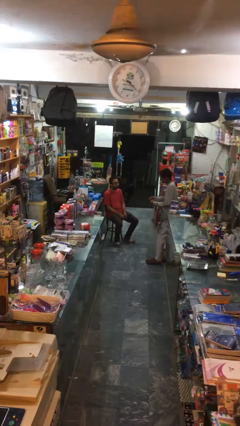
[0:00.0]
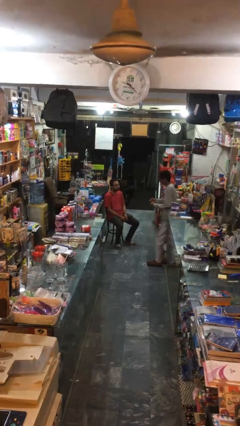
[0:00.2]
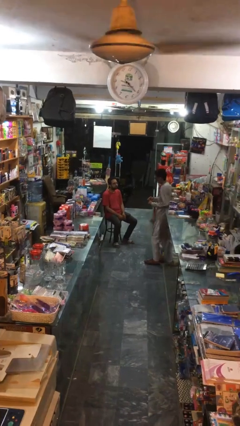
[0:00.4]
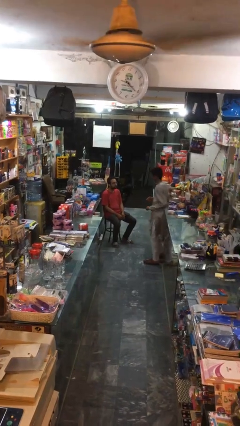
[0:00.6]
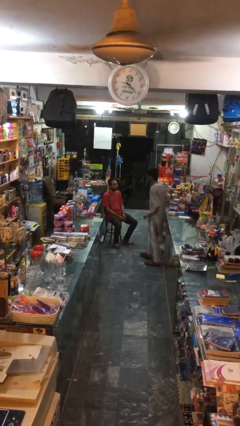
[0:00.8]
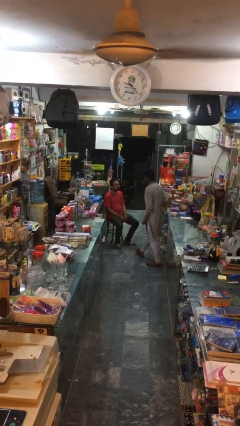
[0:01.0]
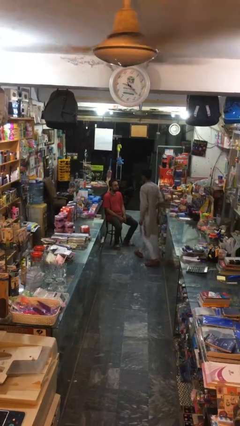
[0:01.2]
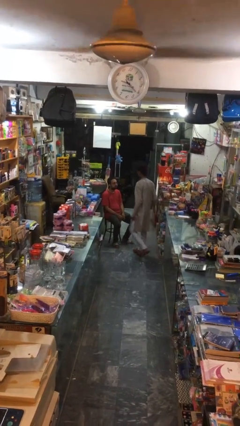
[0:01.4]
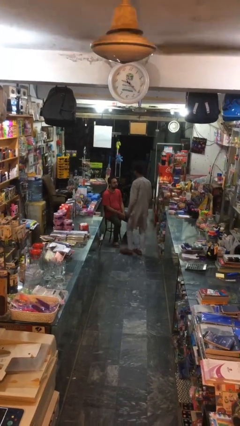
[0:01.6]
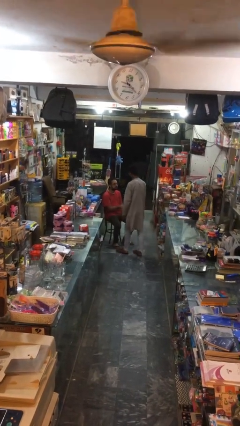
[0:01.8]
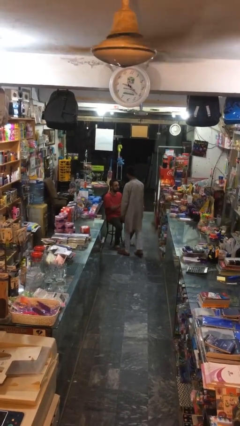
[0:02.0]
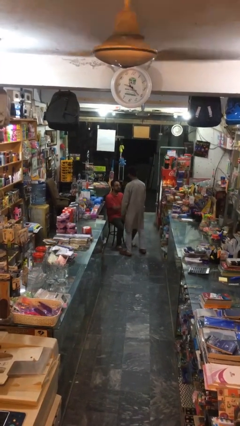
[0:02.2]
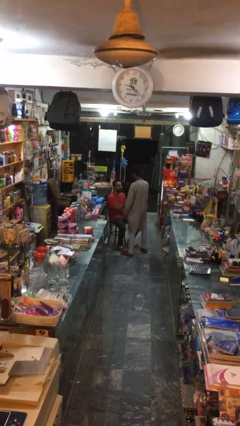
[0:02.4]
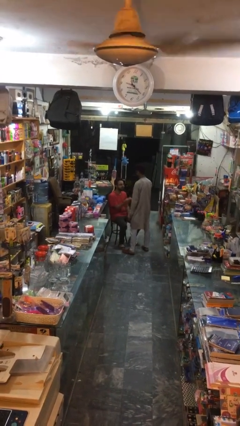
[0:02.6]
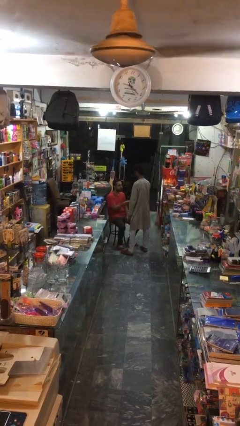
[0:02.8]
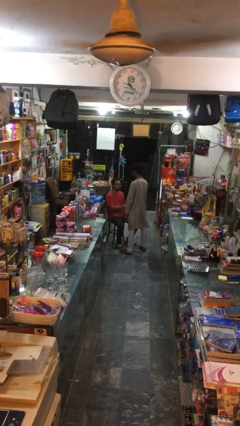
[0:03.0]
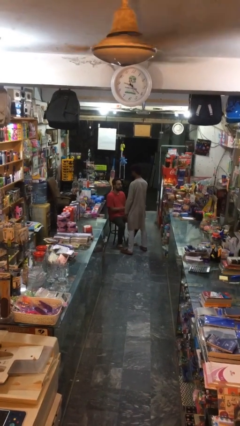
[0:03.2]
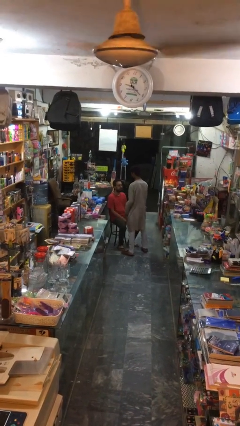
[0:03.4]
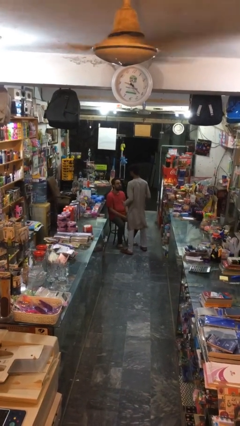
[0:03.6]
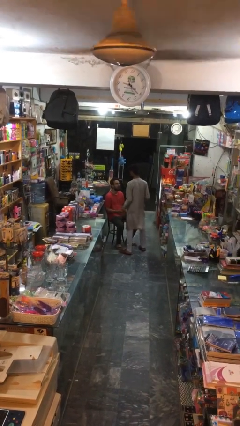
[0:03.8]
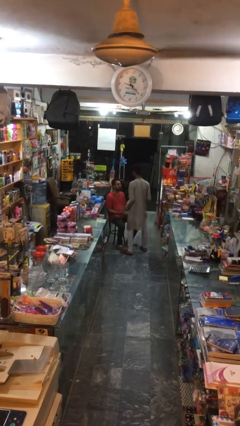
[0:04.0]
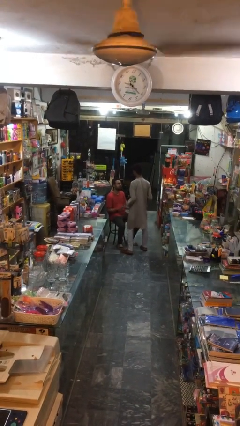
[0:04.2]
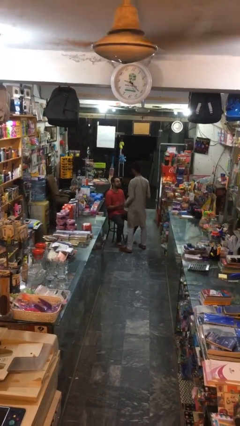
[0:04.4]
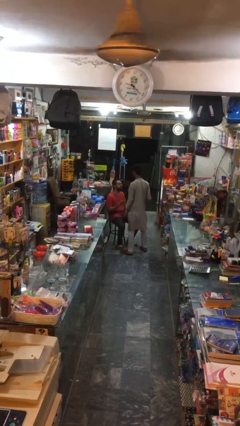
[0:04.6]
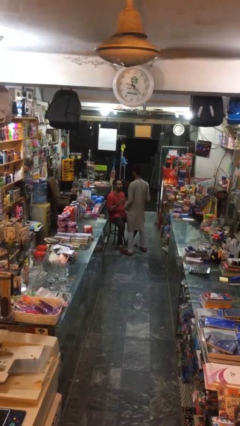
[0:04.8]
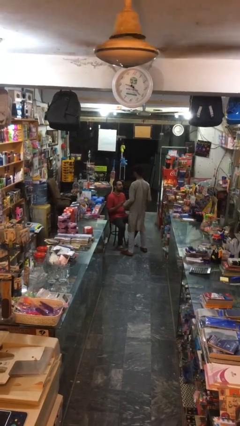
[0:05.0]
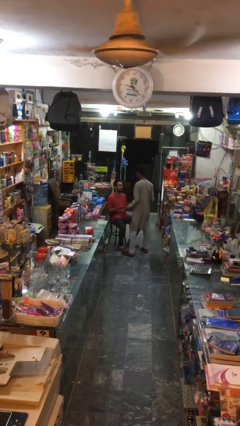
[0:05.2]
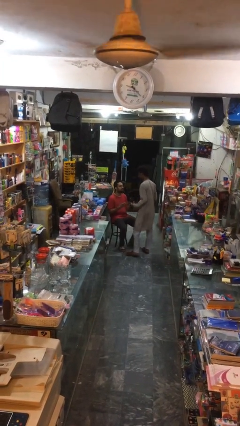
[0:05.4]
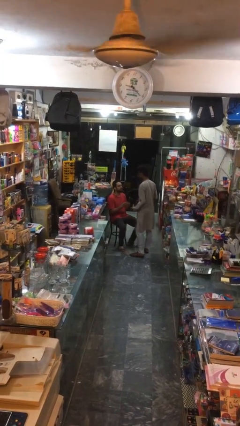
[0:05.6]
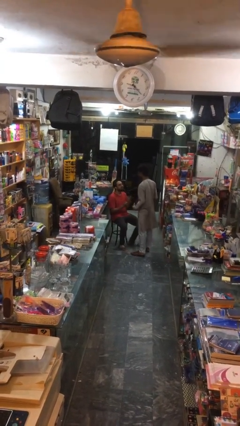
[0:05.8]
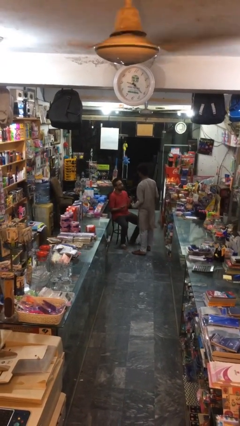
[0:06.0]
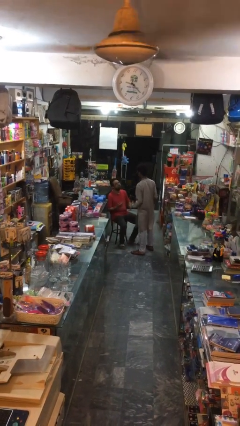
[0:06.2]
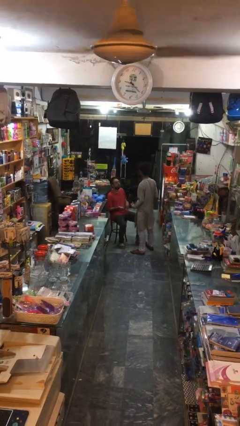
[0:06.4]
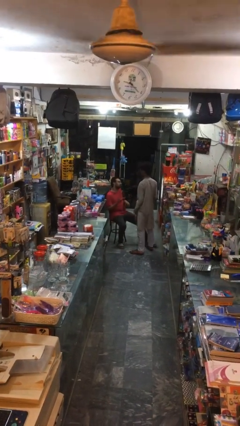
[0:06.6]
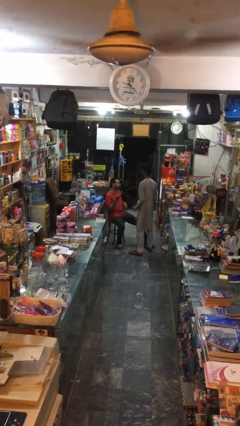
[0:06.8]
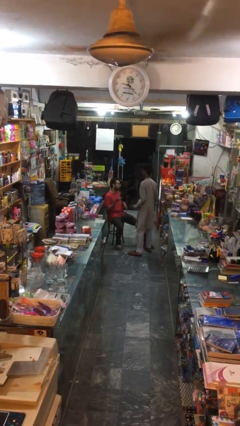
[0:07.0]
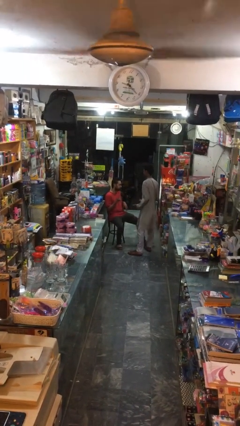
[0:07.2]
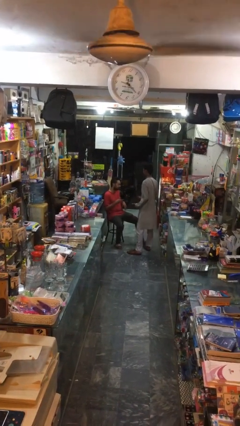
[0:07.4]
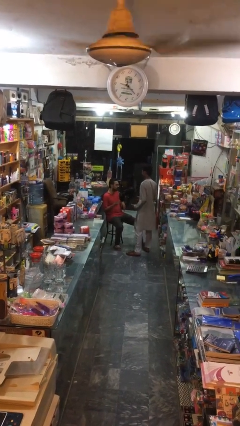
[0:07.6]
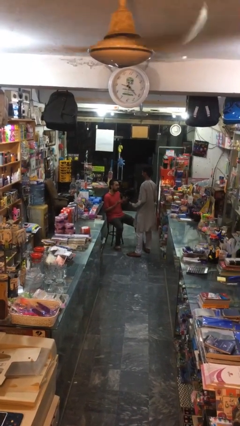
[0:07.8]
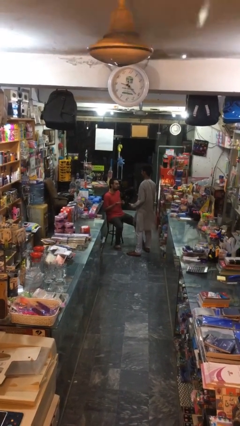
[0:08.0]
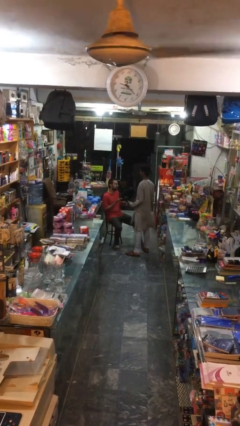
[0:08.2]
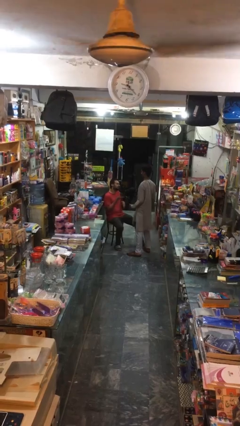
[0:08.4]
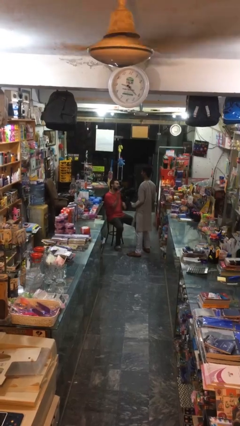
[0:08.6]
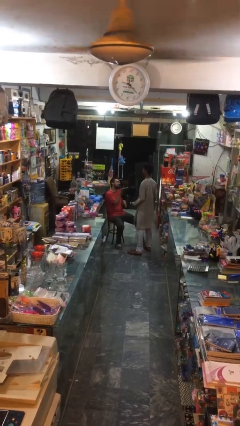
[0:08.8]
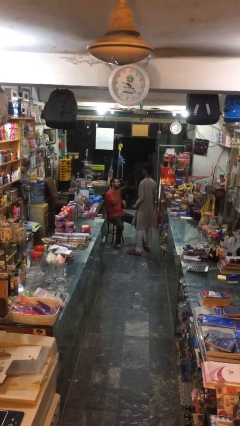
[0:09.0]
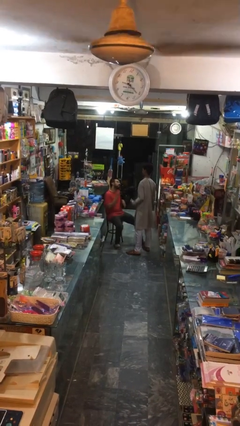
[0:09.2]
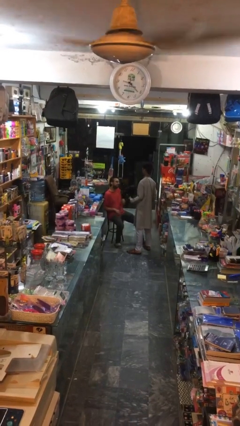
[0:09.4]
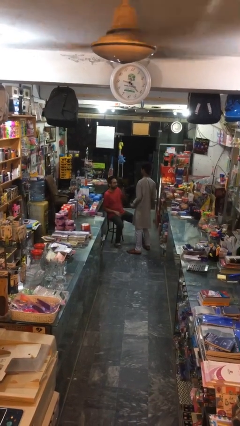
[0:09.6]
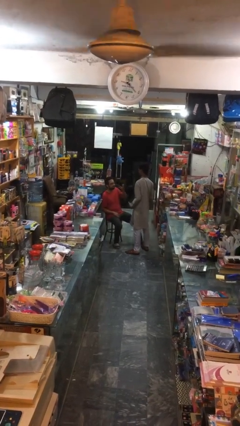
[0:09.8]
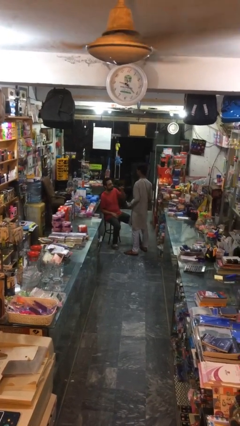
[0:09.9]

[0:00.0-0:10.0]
person shakes hand

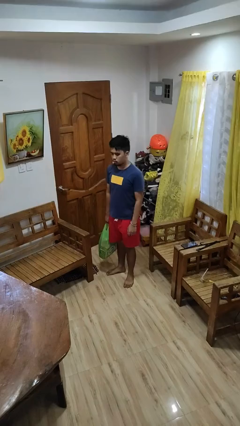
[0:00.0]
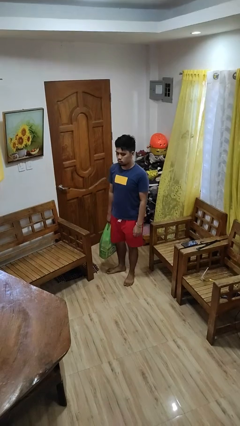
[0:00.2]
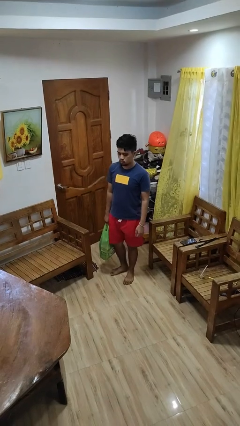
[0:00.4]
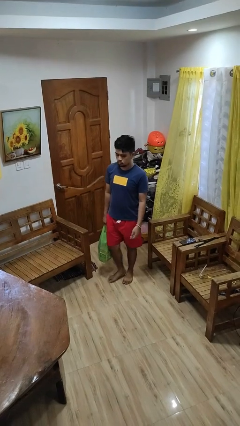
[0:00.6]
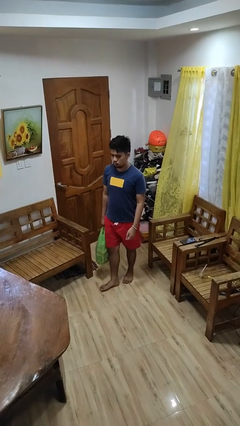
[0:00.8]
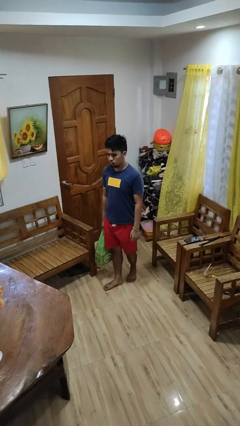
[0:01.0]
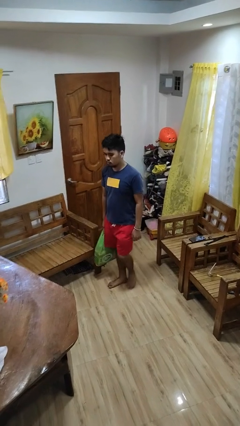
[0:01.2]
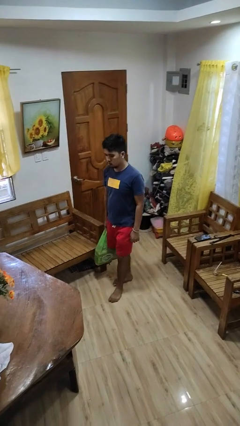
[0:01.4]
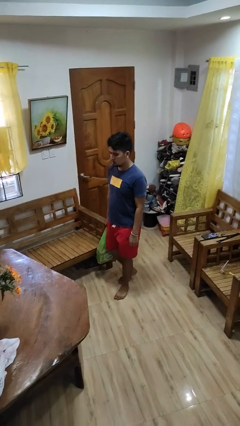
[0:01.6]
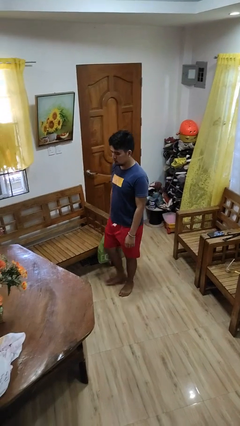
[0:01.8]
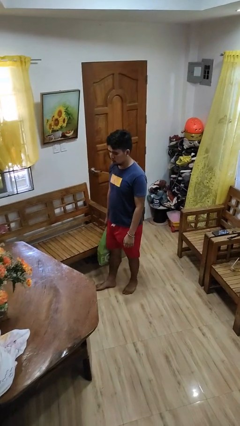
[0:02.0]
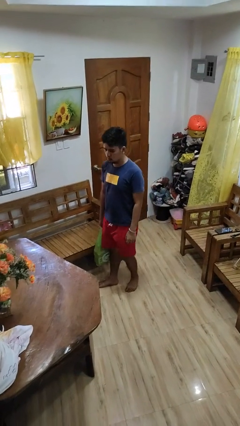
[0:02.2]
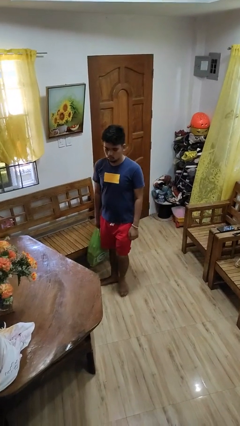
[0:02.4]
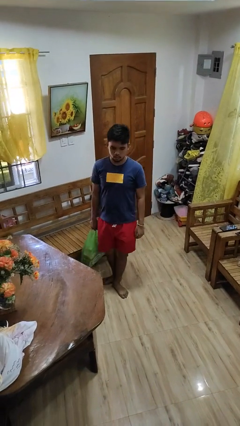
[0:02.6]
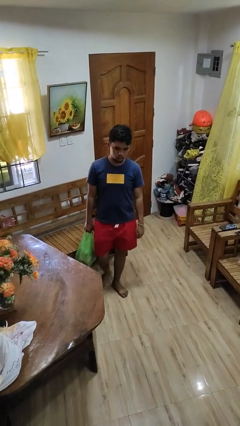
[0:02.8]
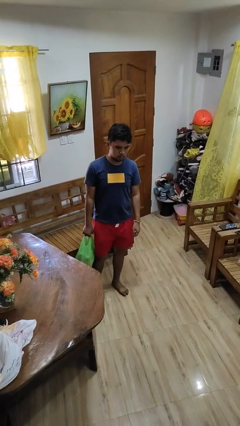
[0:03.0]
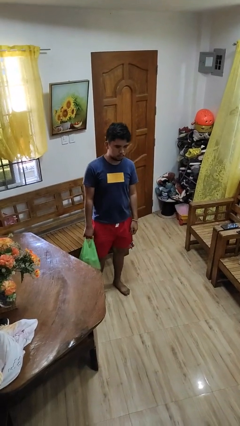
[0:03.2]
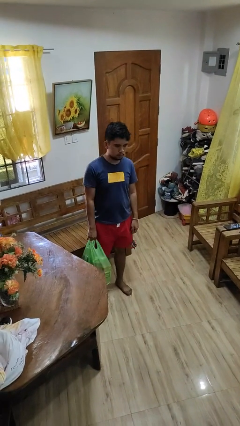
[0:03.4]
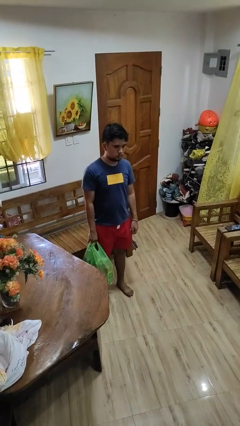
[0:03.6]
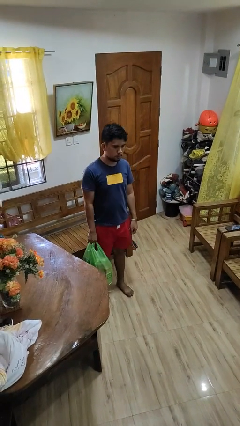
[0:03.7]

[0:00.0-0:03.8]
person carries groceries

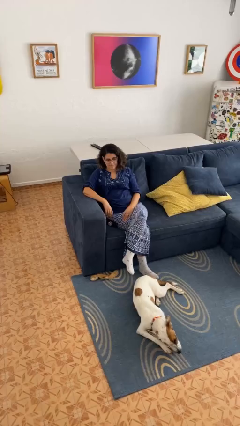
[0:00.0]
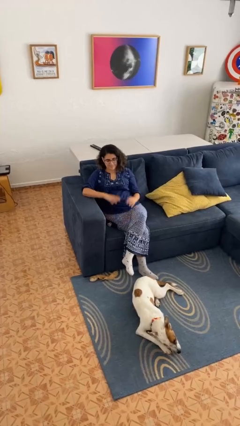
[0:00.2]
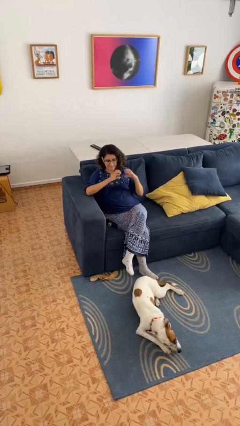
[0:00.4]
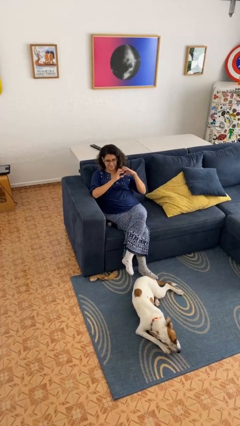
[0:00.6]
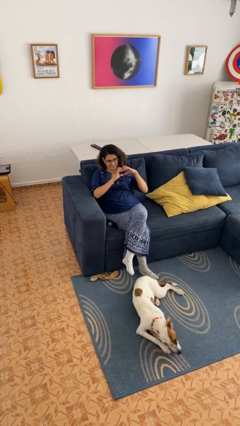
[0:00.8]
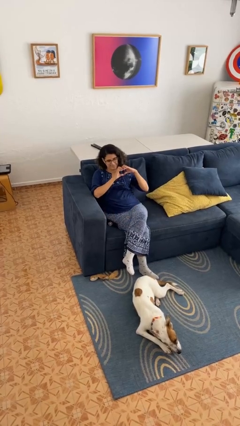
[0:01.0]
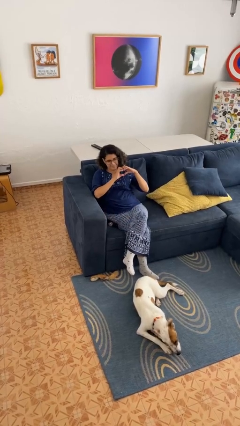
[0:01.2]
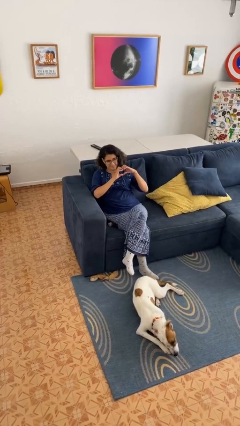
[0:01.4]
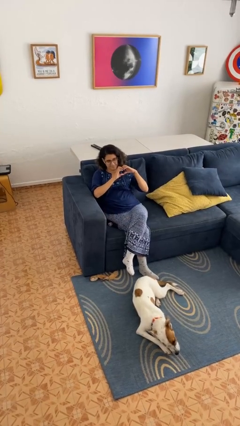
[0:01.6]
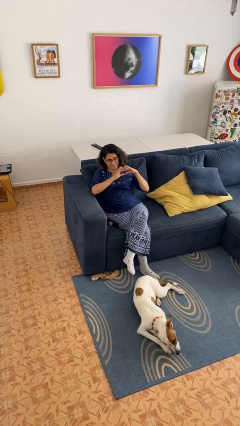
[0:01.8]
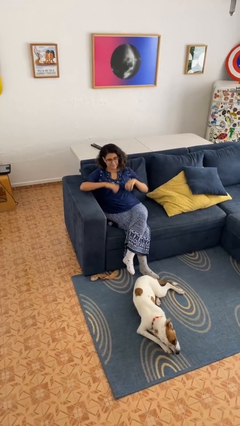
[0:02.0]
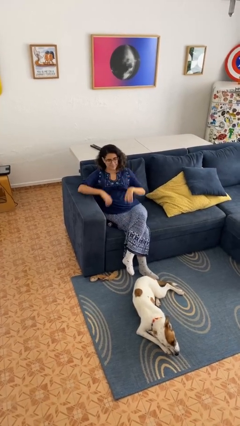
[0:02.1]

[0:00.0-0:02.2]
person gestures heart

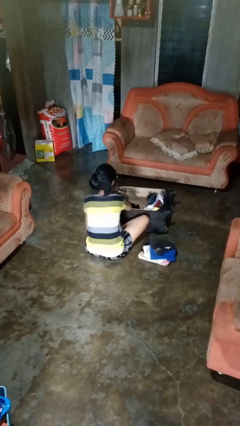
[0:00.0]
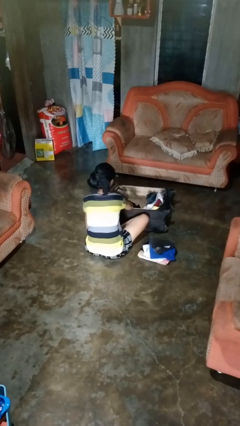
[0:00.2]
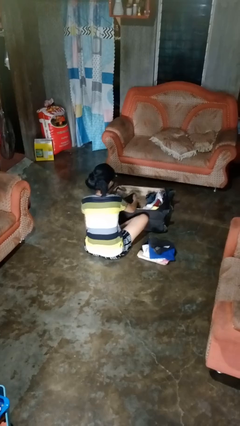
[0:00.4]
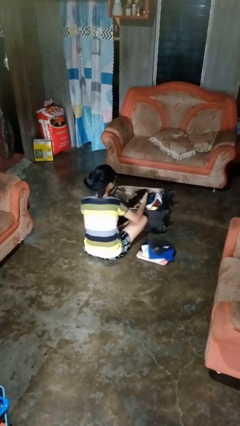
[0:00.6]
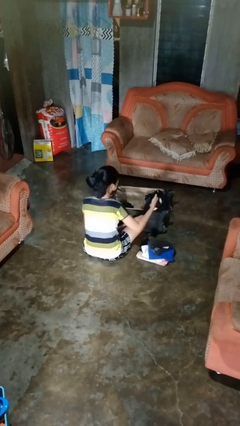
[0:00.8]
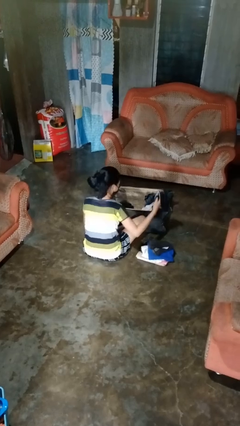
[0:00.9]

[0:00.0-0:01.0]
person unloads clothes from suitcase

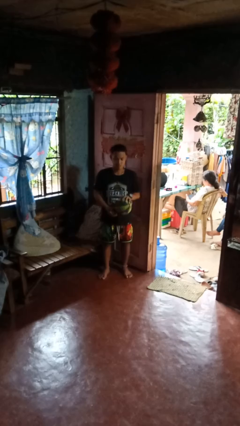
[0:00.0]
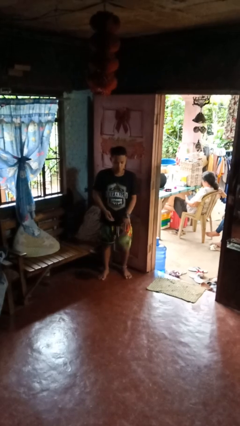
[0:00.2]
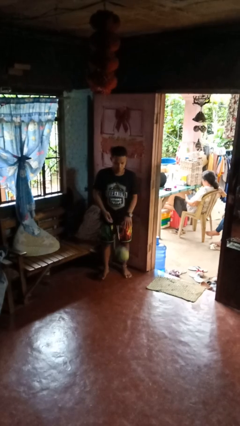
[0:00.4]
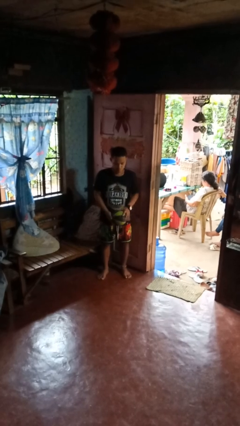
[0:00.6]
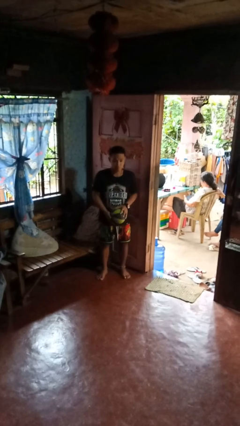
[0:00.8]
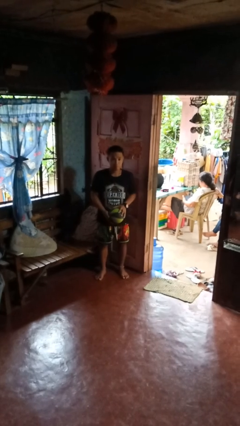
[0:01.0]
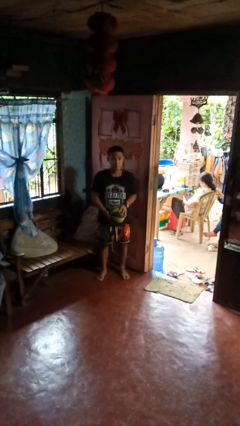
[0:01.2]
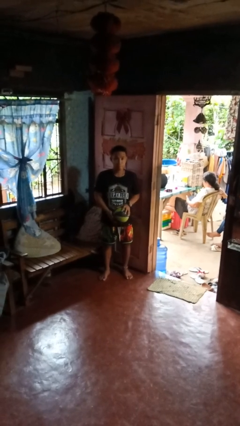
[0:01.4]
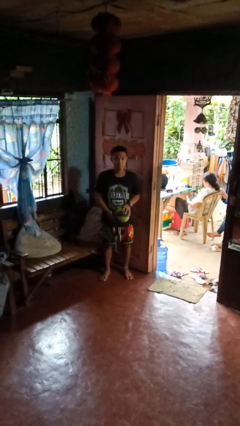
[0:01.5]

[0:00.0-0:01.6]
person bounces ball on floor
